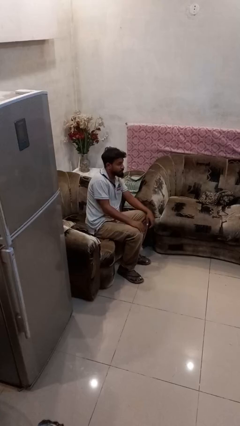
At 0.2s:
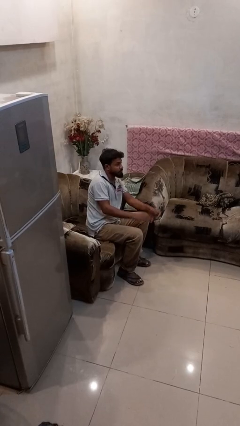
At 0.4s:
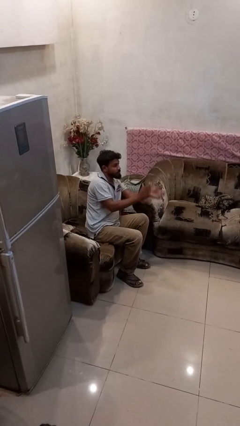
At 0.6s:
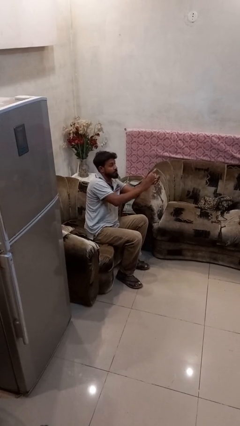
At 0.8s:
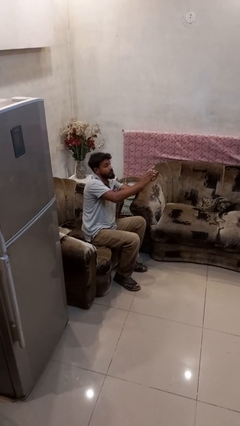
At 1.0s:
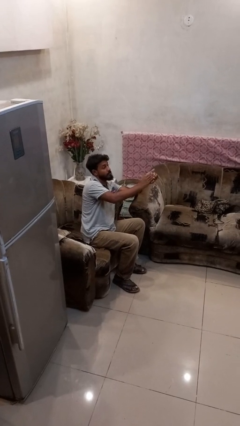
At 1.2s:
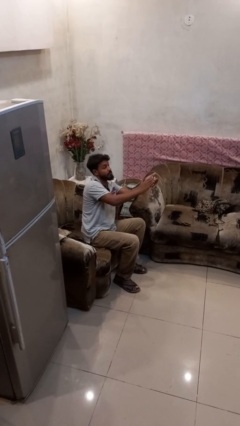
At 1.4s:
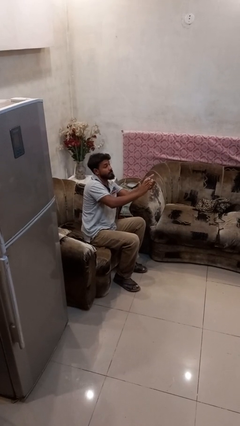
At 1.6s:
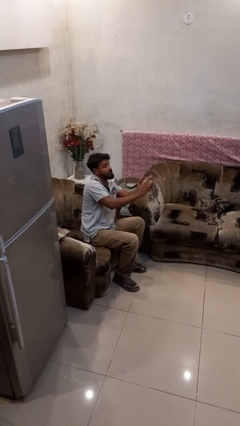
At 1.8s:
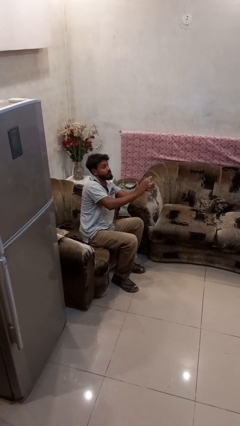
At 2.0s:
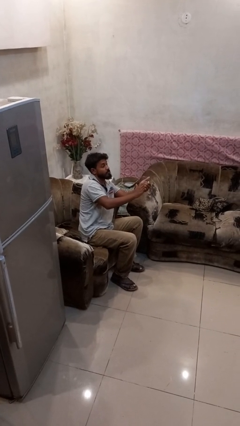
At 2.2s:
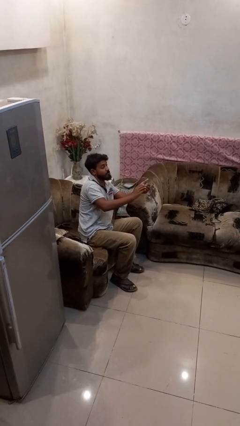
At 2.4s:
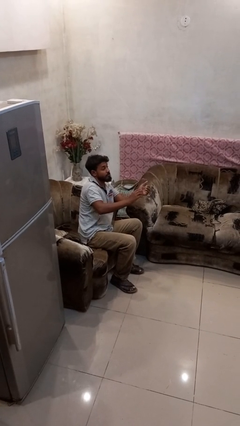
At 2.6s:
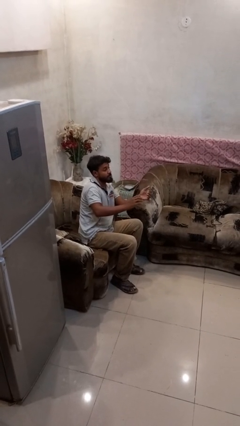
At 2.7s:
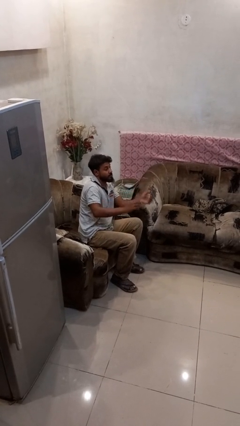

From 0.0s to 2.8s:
person claps hands

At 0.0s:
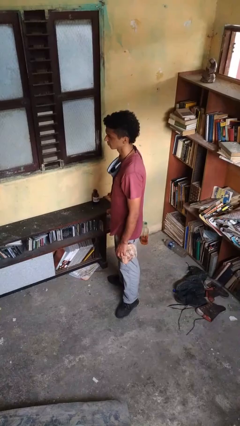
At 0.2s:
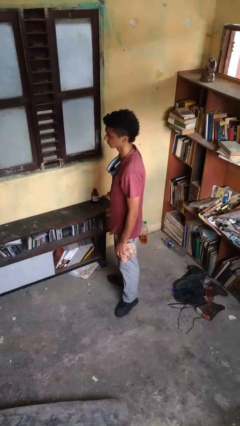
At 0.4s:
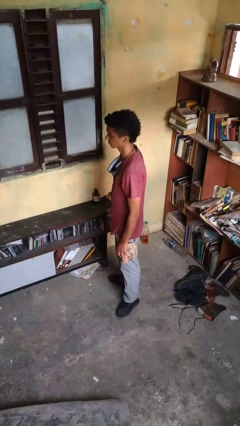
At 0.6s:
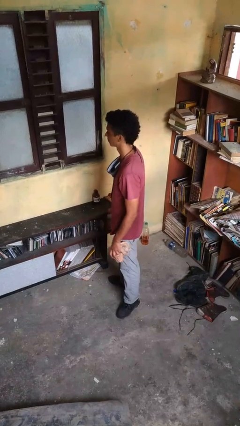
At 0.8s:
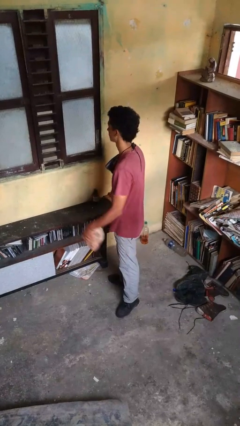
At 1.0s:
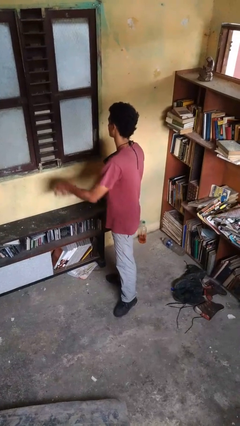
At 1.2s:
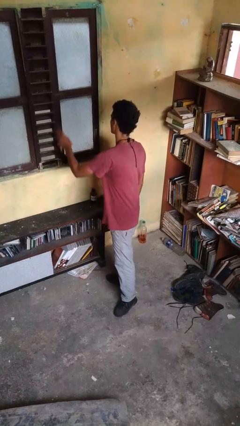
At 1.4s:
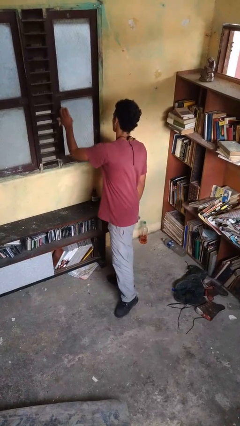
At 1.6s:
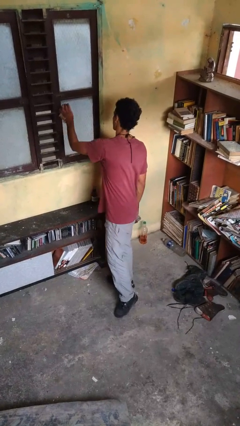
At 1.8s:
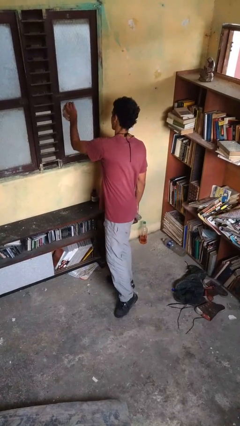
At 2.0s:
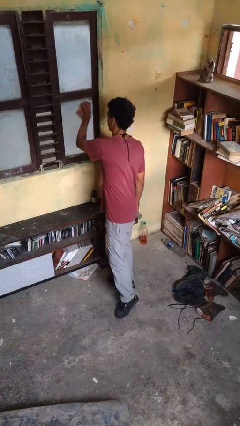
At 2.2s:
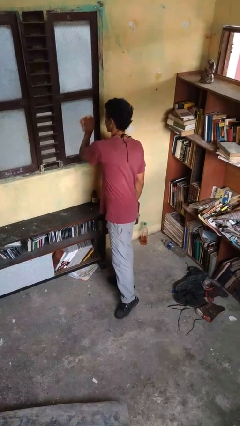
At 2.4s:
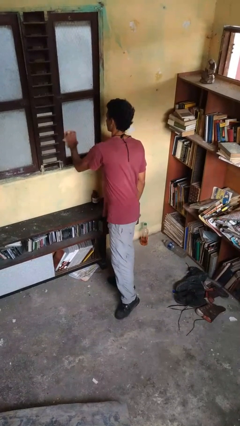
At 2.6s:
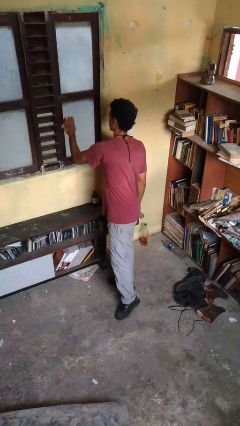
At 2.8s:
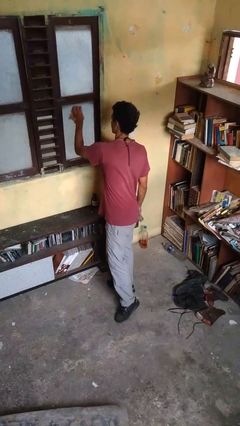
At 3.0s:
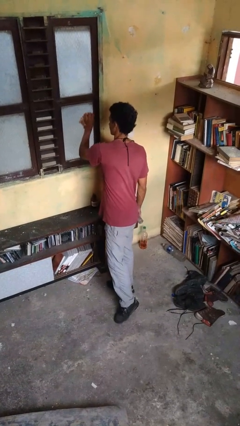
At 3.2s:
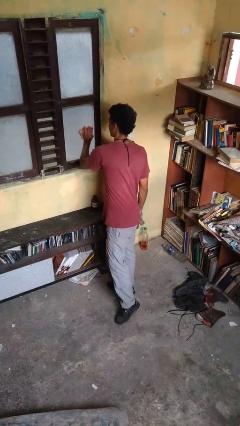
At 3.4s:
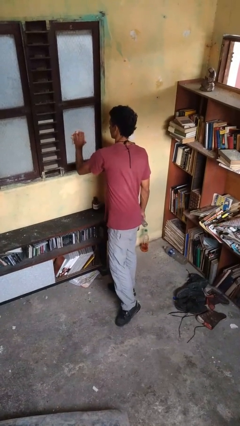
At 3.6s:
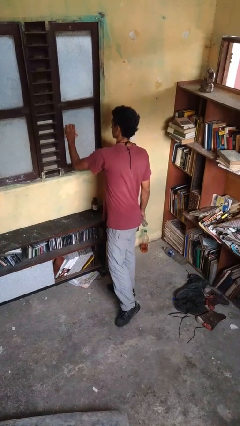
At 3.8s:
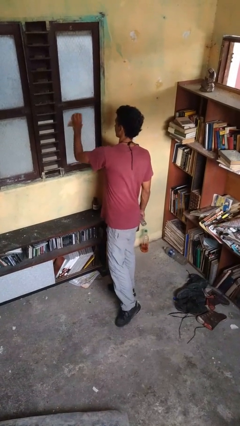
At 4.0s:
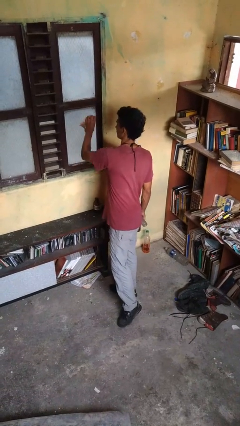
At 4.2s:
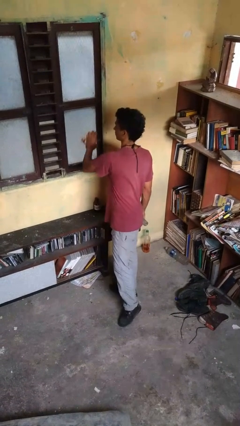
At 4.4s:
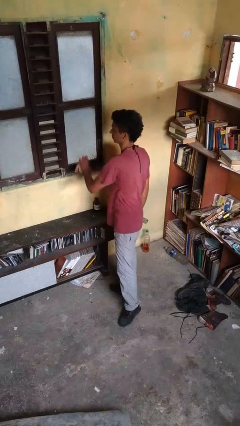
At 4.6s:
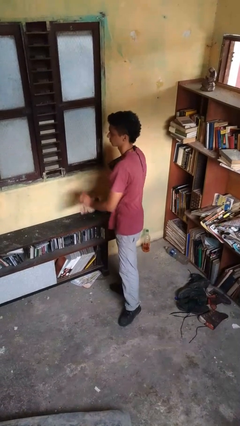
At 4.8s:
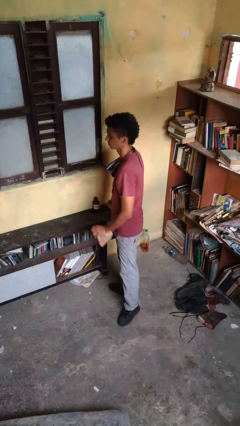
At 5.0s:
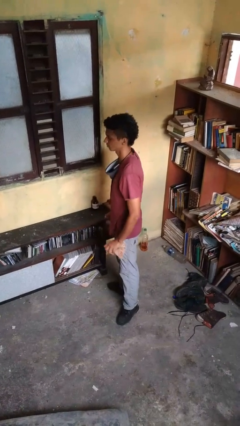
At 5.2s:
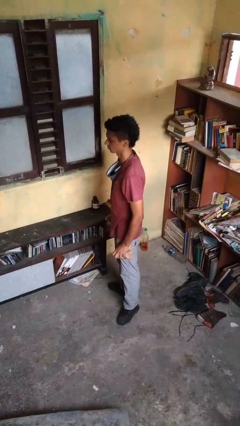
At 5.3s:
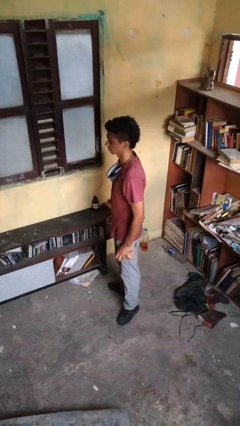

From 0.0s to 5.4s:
person washes window

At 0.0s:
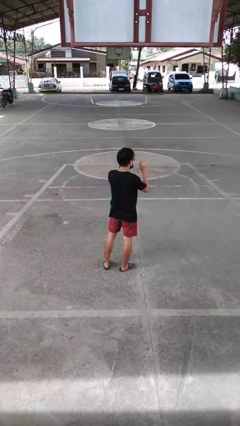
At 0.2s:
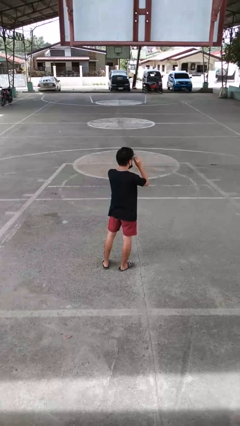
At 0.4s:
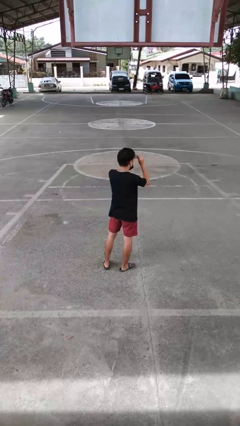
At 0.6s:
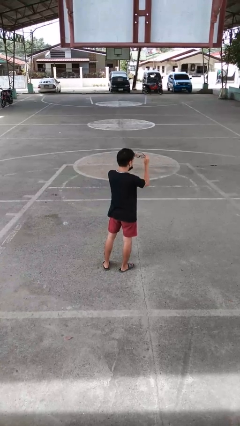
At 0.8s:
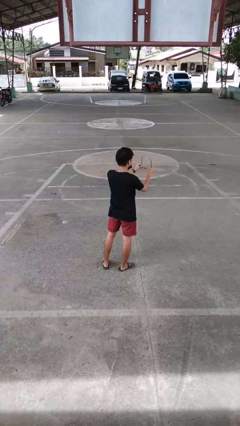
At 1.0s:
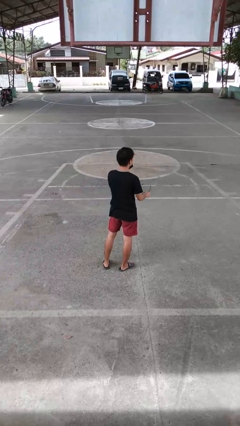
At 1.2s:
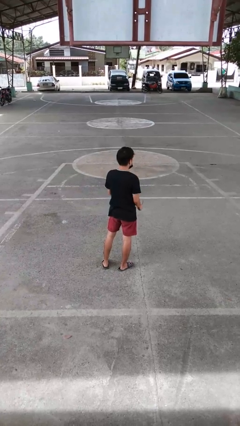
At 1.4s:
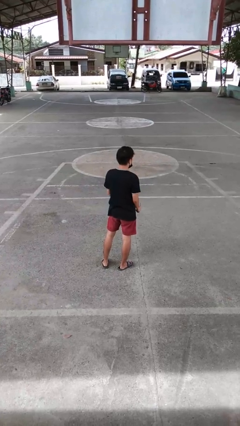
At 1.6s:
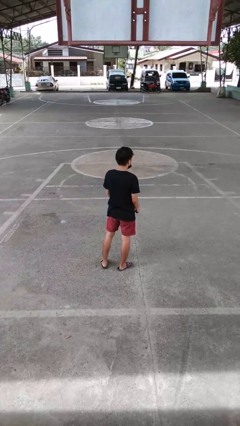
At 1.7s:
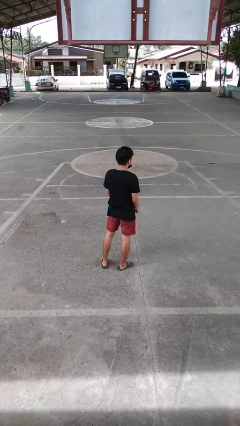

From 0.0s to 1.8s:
person takes off glasses

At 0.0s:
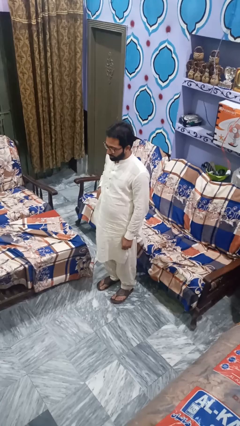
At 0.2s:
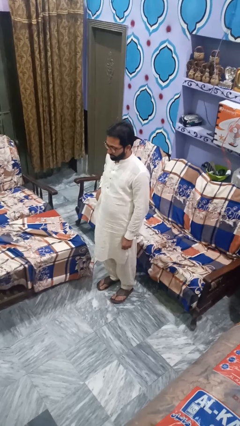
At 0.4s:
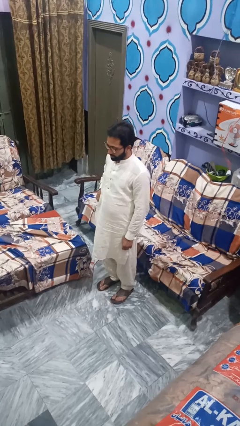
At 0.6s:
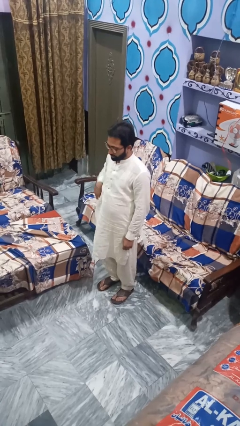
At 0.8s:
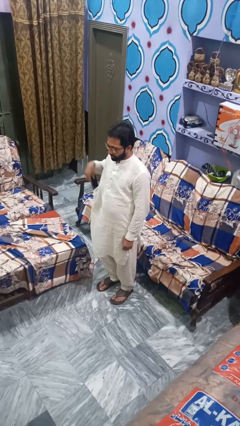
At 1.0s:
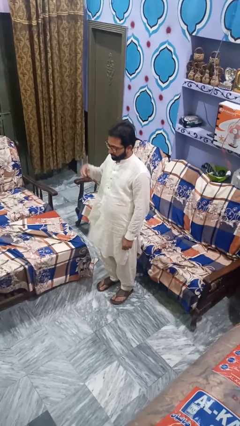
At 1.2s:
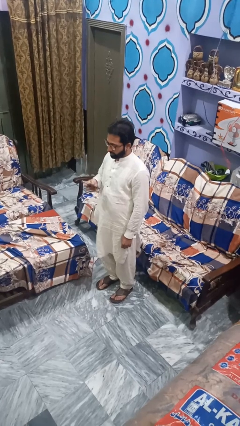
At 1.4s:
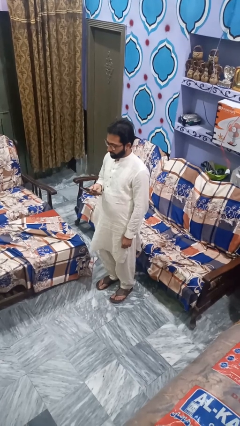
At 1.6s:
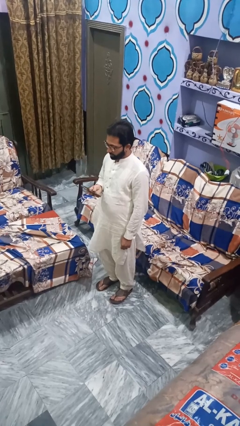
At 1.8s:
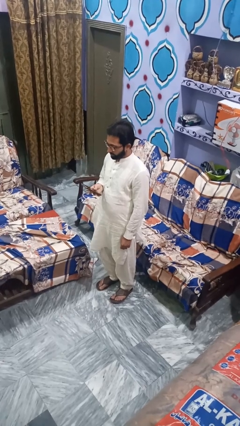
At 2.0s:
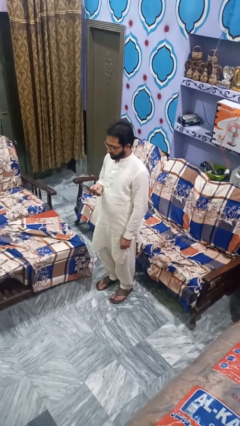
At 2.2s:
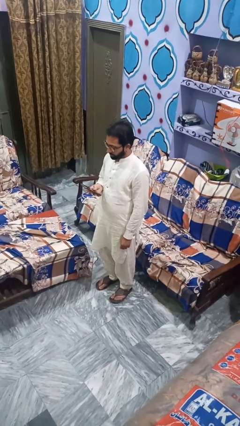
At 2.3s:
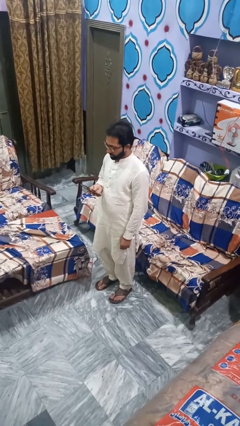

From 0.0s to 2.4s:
person takes phone from pocket

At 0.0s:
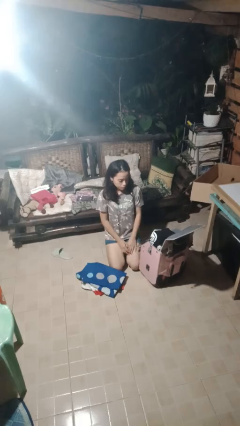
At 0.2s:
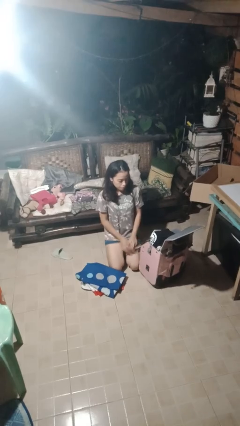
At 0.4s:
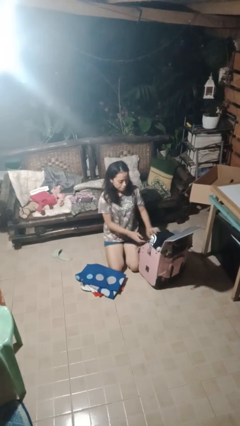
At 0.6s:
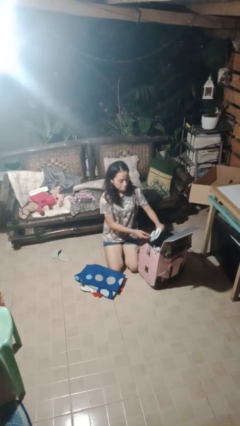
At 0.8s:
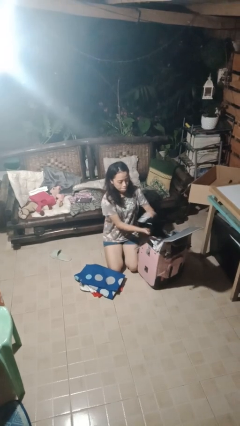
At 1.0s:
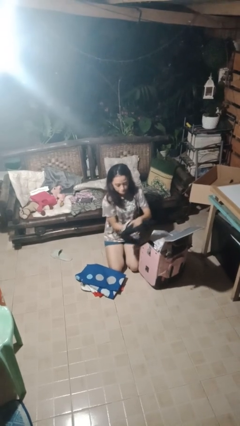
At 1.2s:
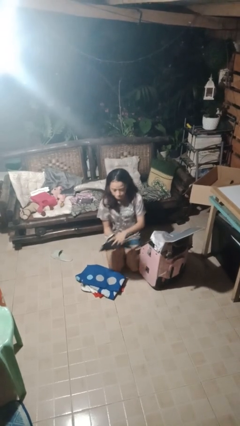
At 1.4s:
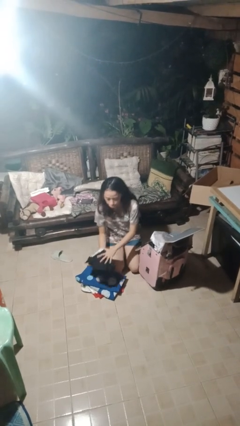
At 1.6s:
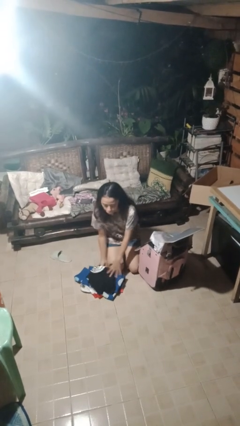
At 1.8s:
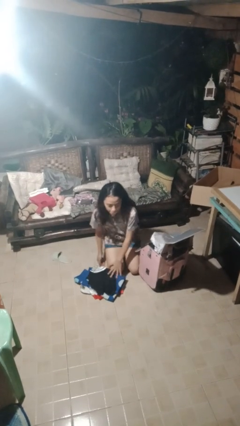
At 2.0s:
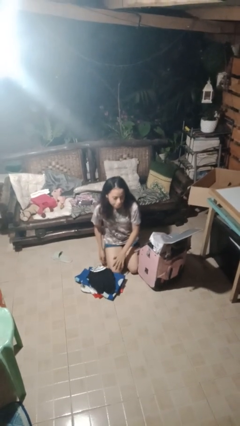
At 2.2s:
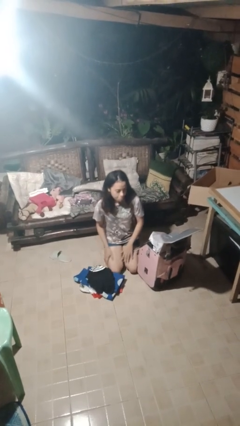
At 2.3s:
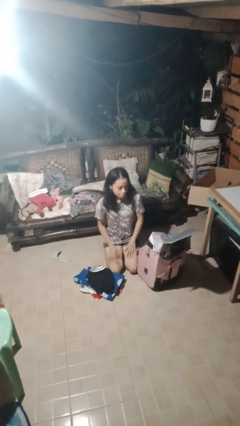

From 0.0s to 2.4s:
person unloads clothes from suitcase

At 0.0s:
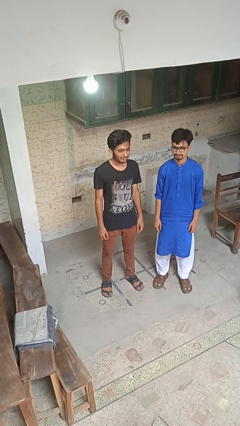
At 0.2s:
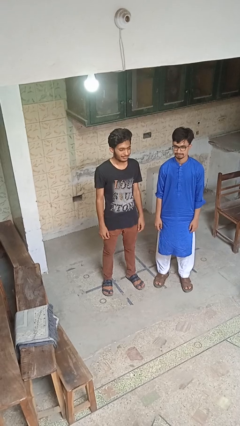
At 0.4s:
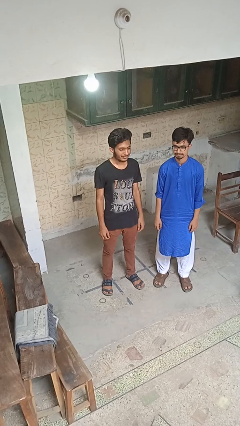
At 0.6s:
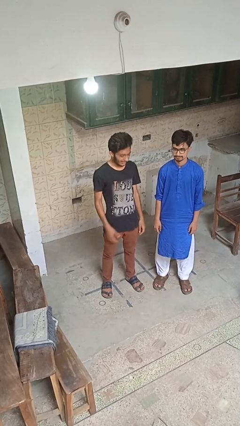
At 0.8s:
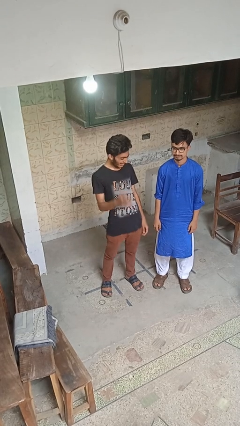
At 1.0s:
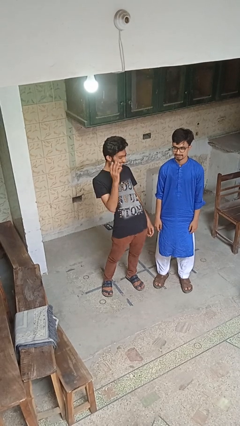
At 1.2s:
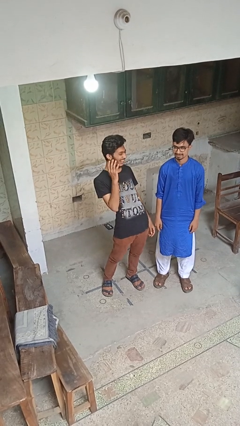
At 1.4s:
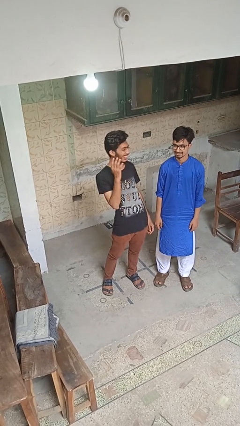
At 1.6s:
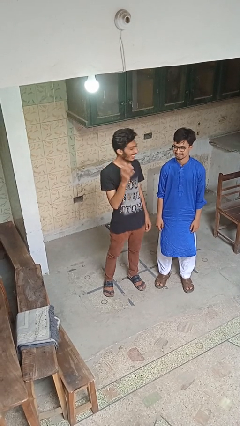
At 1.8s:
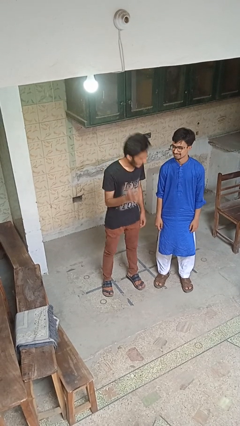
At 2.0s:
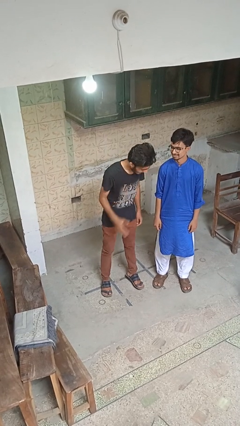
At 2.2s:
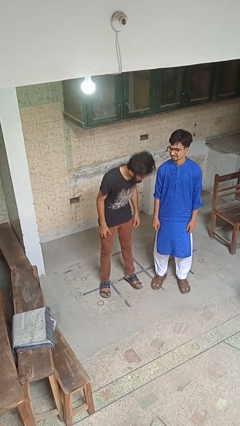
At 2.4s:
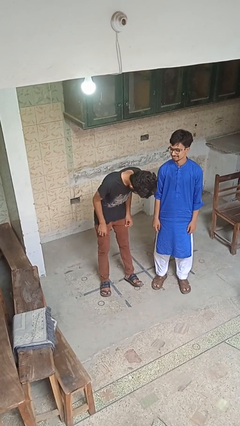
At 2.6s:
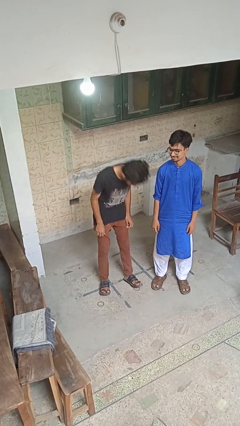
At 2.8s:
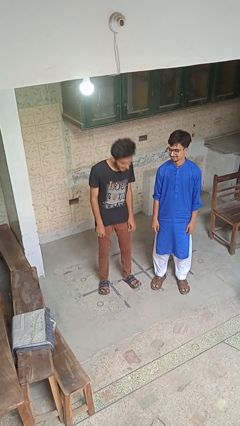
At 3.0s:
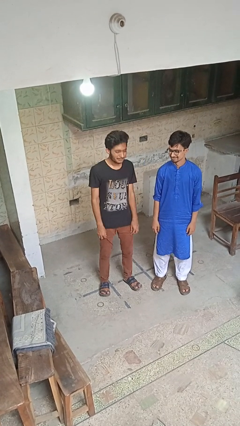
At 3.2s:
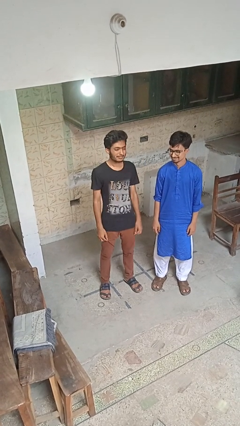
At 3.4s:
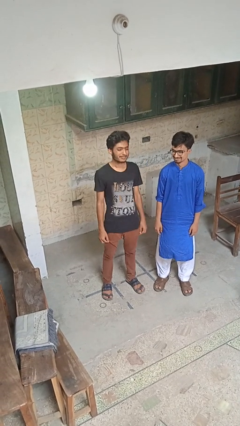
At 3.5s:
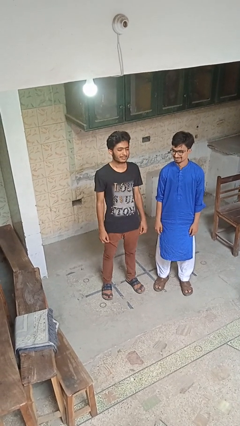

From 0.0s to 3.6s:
person laughs with person
